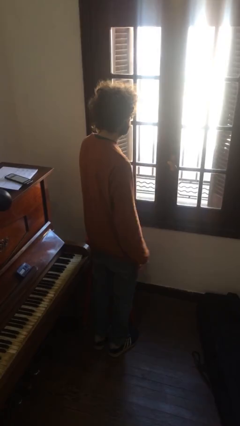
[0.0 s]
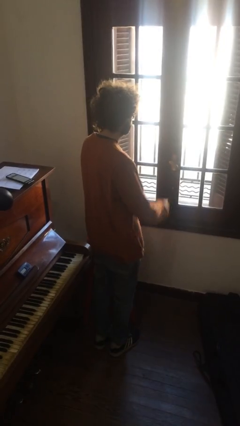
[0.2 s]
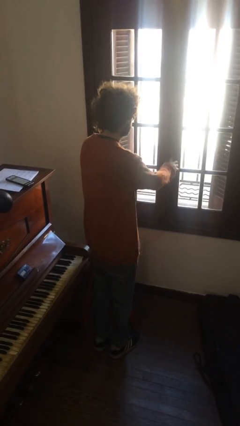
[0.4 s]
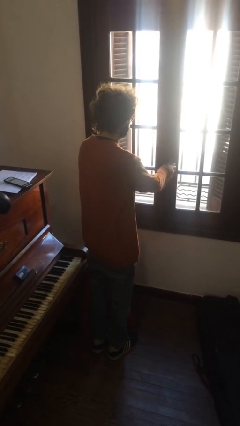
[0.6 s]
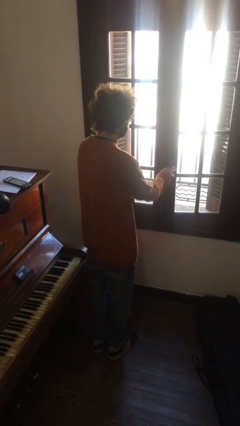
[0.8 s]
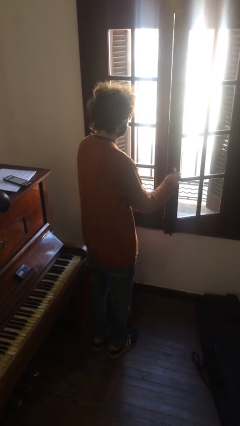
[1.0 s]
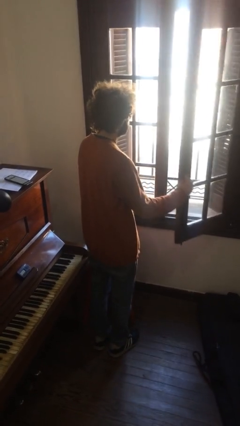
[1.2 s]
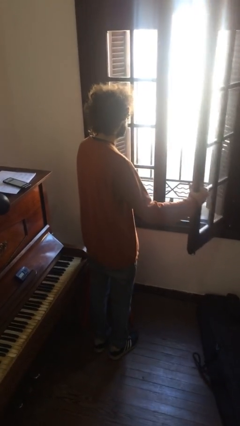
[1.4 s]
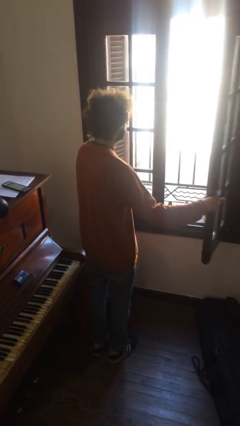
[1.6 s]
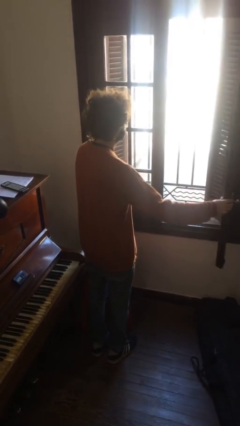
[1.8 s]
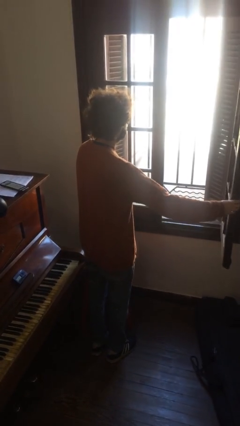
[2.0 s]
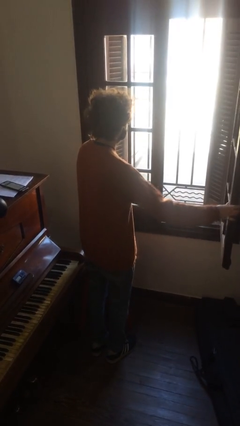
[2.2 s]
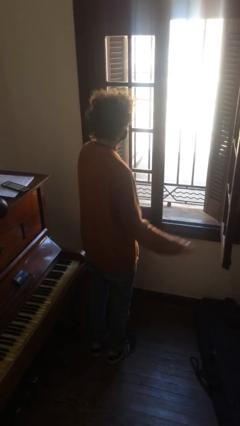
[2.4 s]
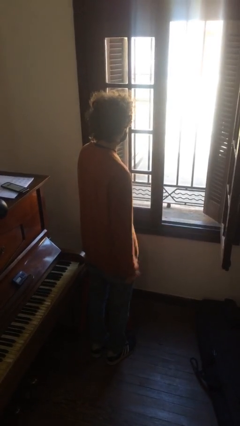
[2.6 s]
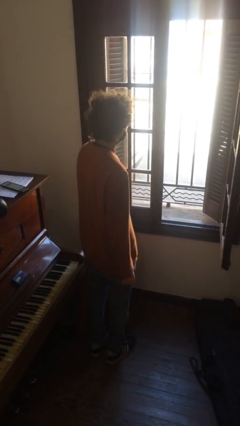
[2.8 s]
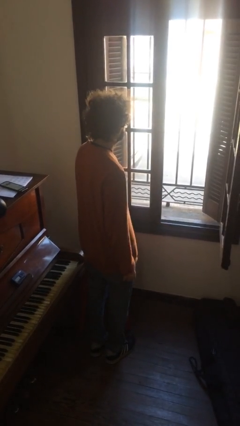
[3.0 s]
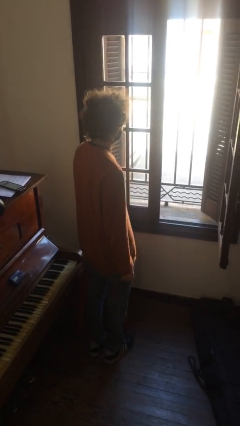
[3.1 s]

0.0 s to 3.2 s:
person opens home window

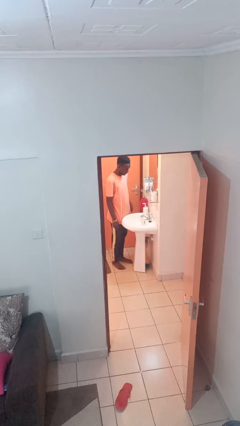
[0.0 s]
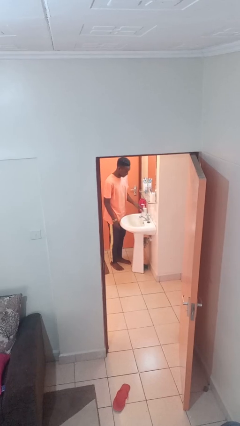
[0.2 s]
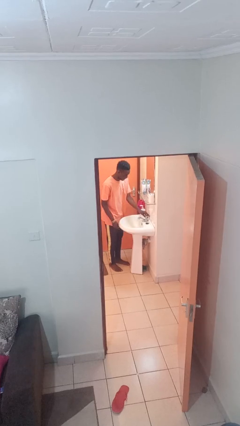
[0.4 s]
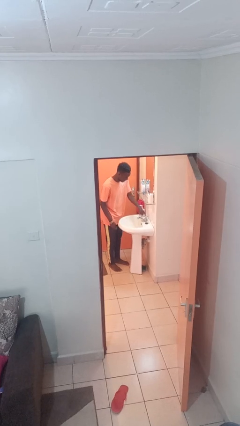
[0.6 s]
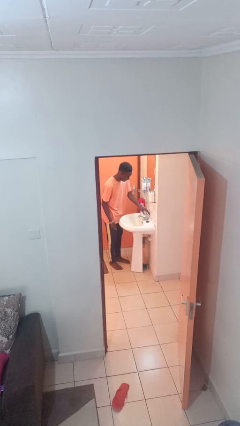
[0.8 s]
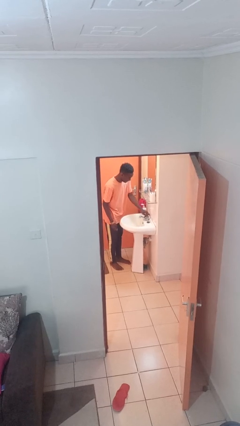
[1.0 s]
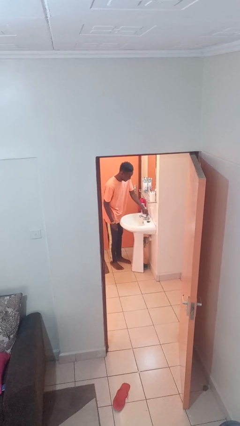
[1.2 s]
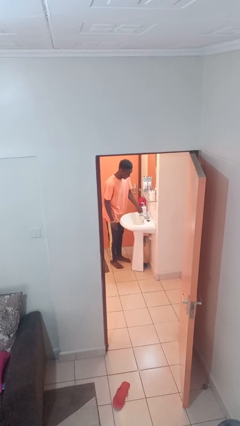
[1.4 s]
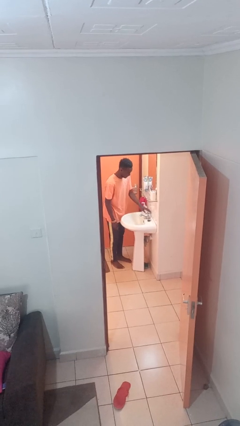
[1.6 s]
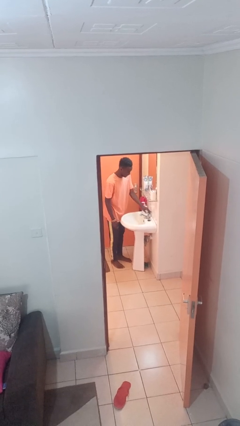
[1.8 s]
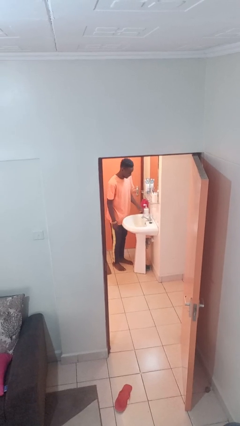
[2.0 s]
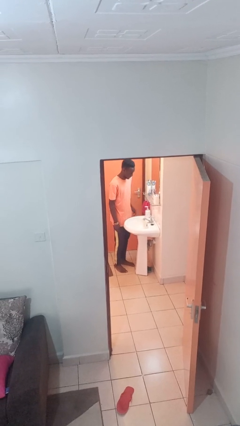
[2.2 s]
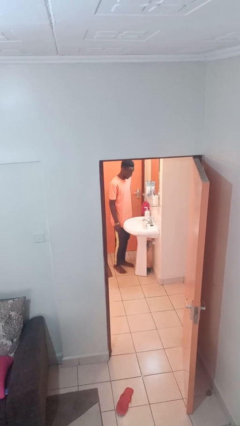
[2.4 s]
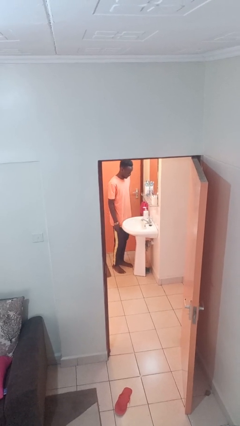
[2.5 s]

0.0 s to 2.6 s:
person turns off faucet

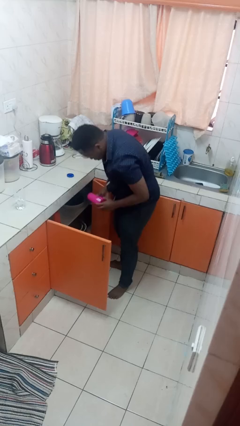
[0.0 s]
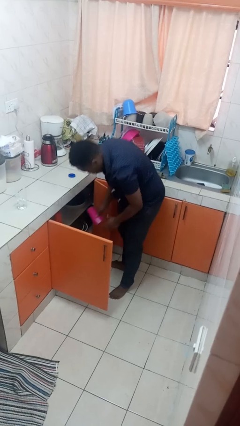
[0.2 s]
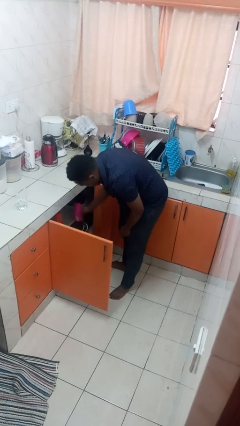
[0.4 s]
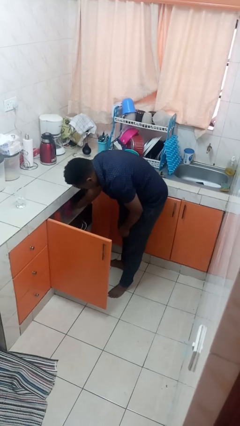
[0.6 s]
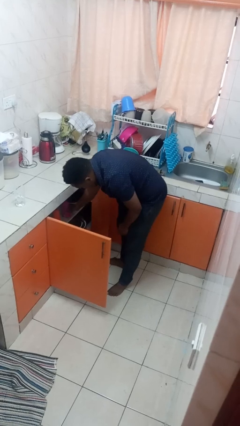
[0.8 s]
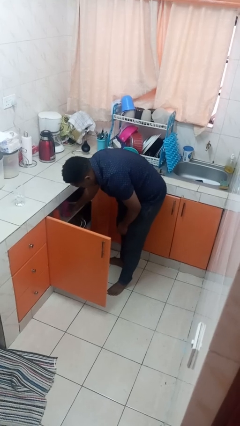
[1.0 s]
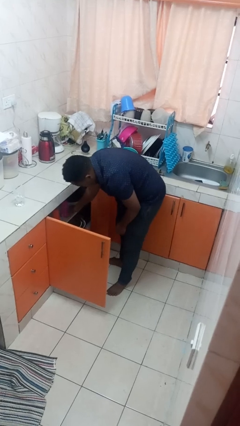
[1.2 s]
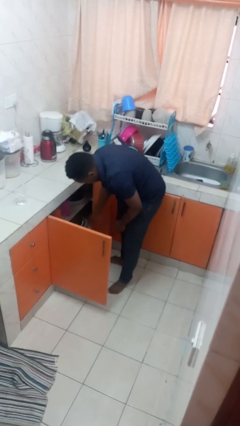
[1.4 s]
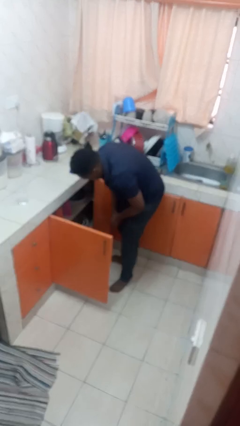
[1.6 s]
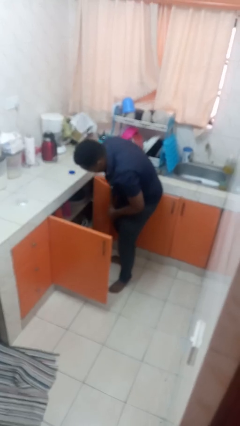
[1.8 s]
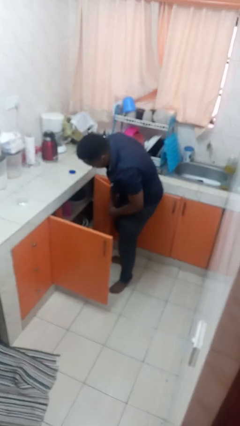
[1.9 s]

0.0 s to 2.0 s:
person puts object in cabinet

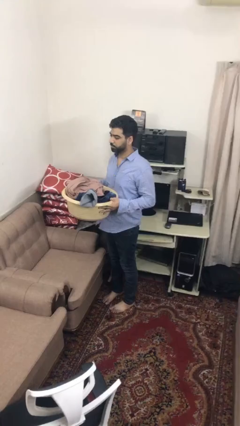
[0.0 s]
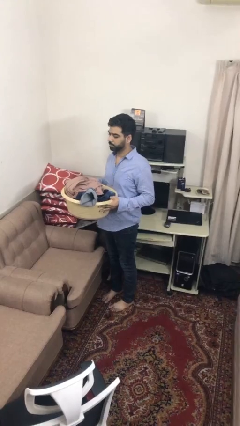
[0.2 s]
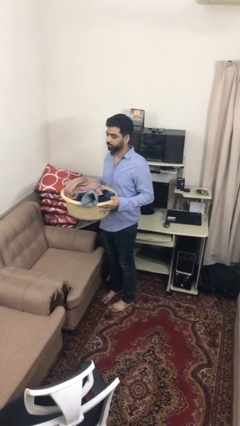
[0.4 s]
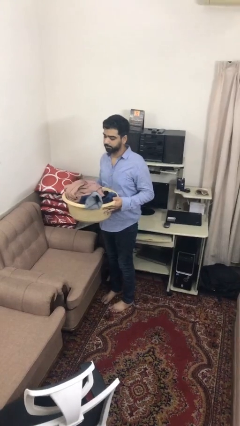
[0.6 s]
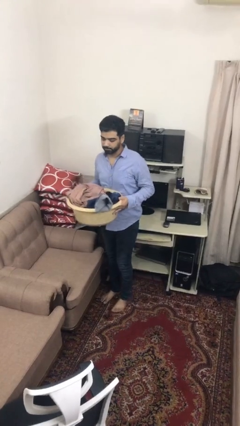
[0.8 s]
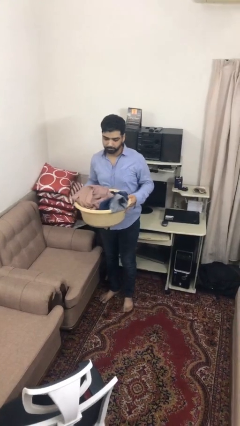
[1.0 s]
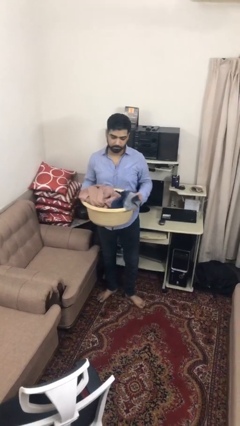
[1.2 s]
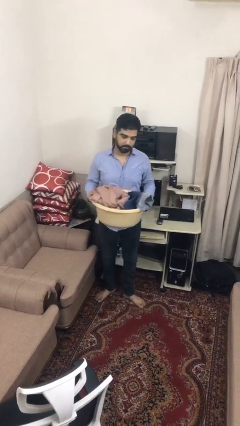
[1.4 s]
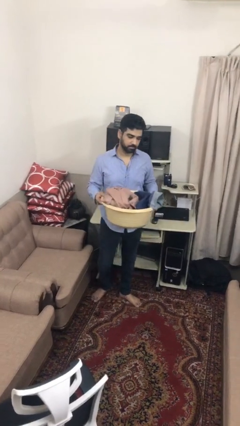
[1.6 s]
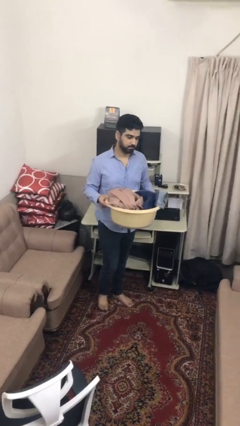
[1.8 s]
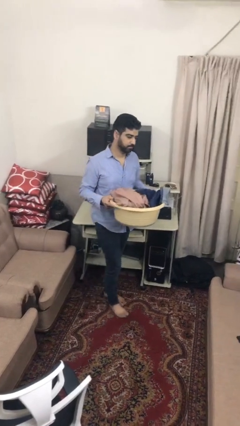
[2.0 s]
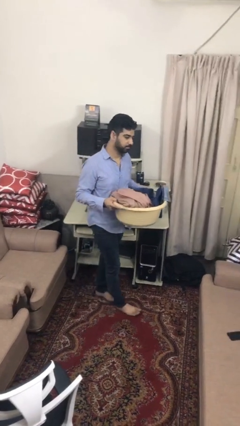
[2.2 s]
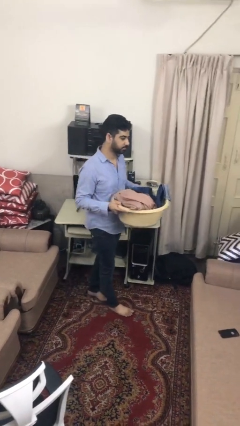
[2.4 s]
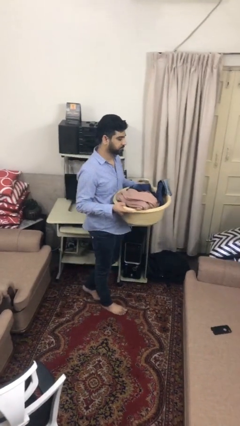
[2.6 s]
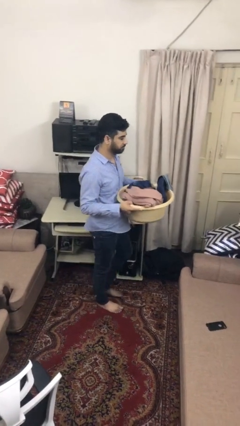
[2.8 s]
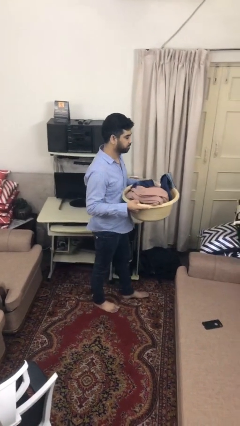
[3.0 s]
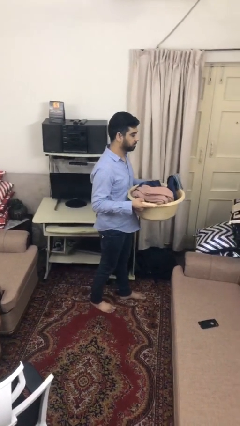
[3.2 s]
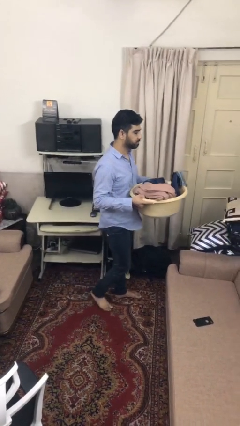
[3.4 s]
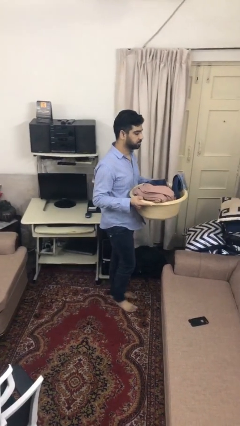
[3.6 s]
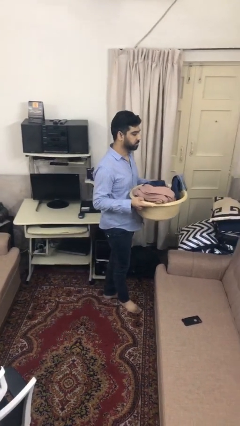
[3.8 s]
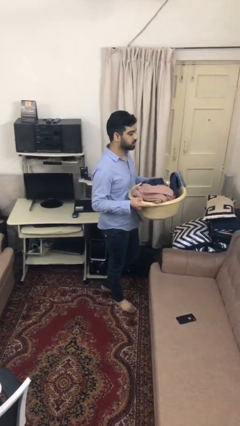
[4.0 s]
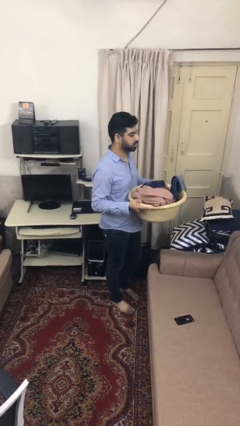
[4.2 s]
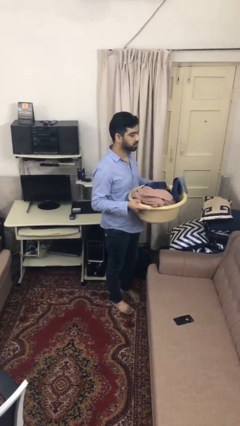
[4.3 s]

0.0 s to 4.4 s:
person carries laundry basket

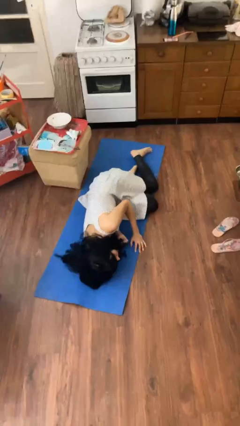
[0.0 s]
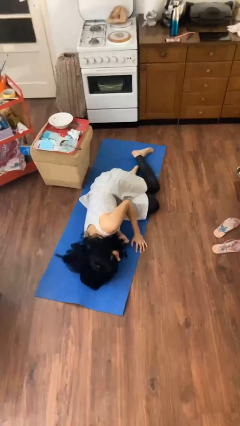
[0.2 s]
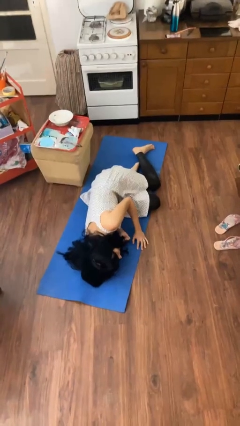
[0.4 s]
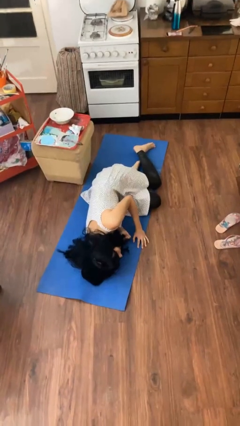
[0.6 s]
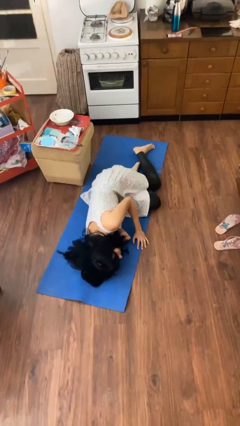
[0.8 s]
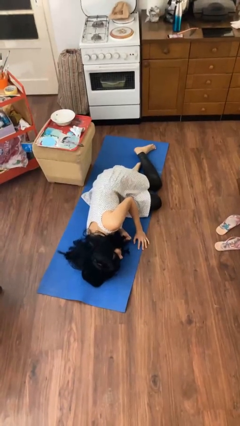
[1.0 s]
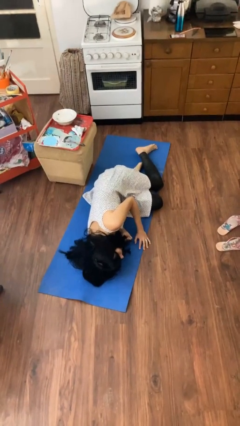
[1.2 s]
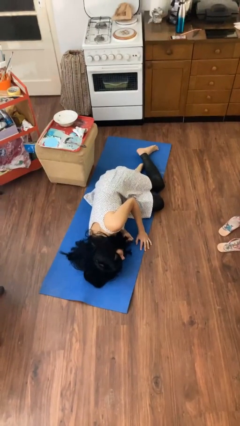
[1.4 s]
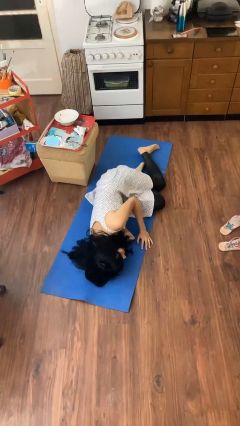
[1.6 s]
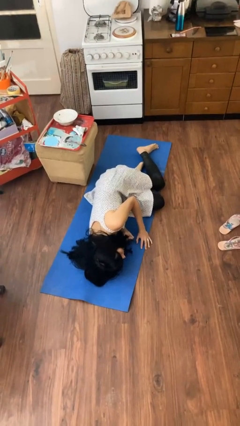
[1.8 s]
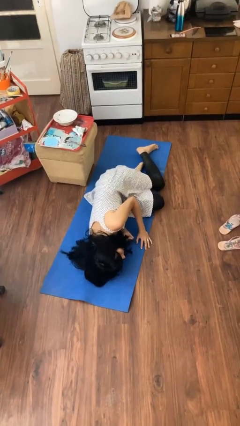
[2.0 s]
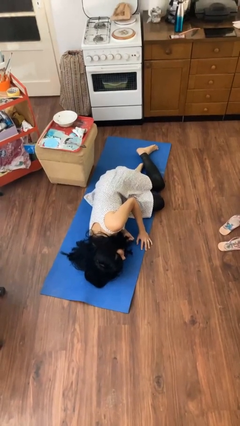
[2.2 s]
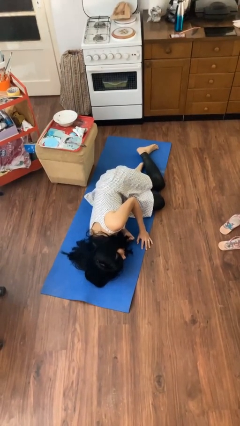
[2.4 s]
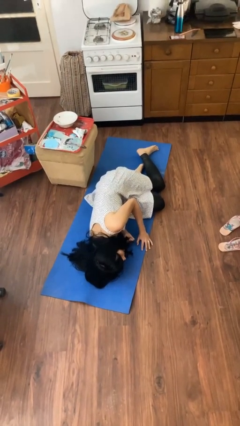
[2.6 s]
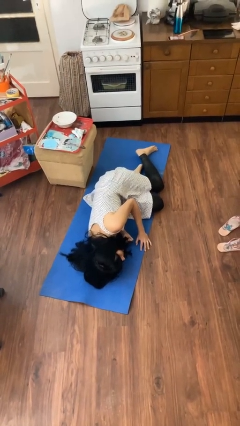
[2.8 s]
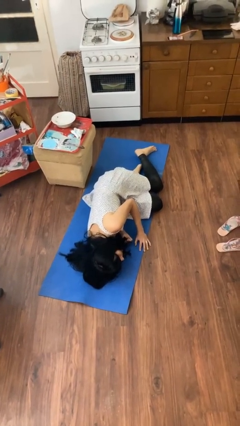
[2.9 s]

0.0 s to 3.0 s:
person lies down on floor

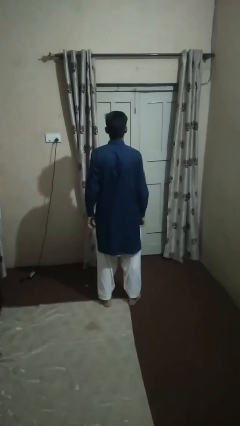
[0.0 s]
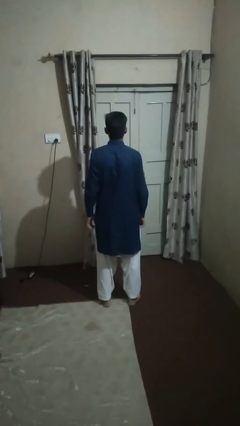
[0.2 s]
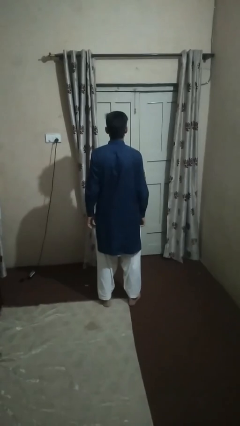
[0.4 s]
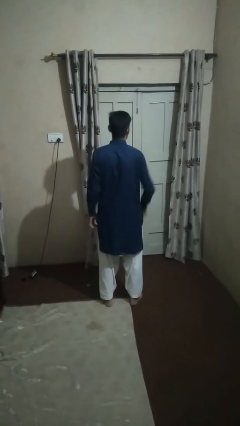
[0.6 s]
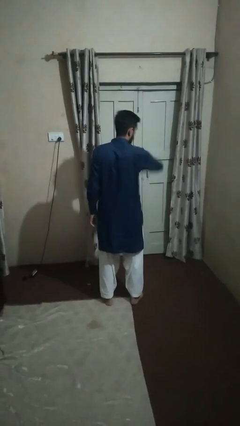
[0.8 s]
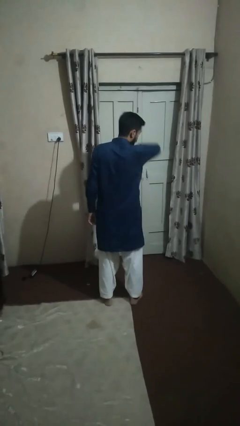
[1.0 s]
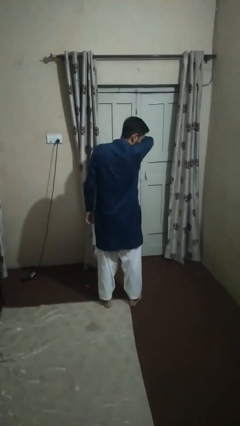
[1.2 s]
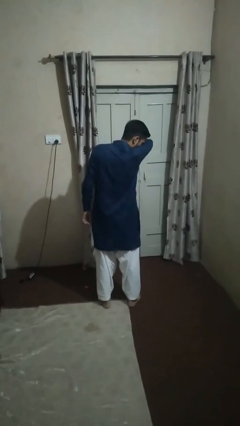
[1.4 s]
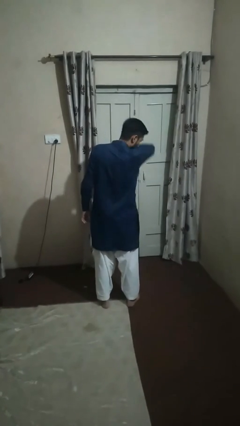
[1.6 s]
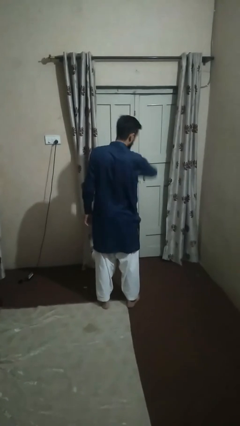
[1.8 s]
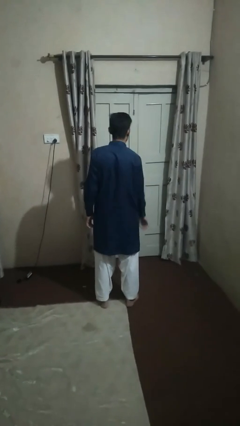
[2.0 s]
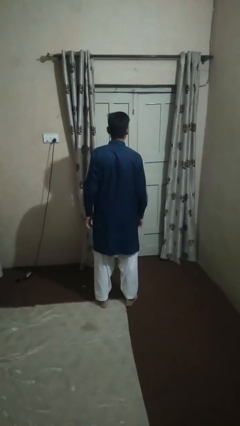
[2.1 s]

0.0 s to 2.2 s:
person sneezes into arm
